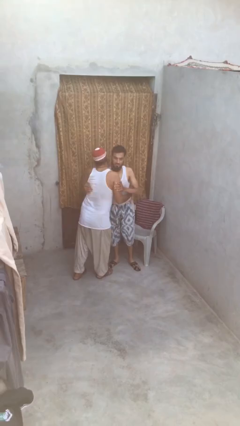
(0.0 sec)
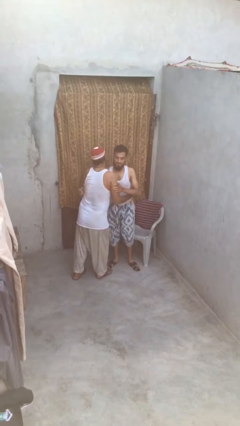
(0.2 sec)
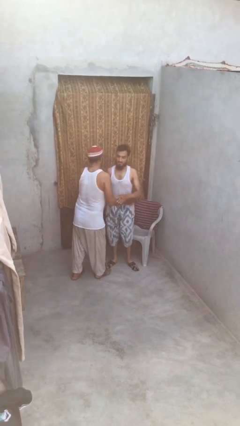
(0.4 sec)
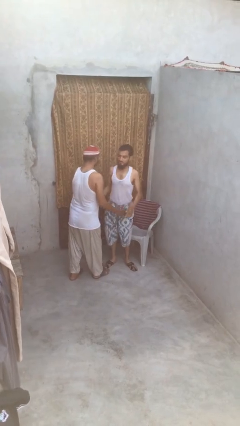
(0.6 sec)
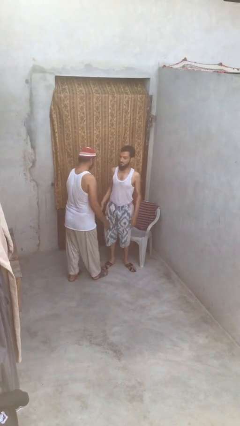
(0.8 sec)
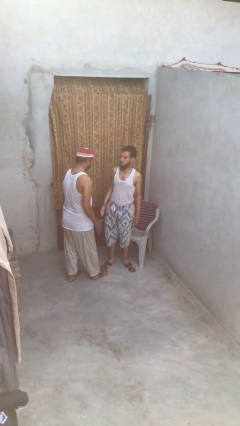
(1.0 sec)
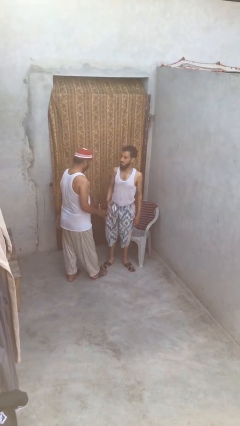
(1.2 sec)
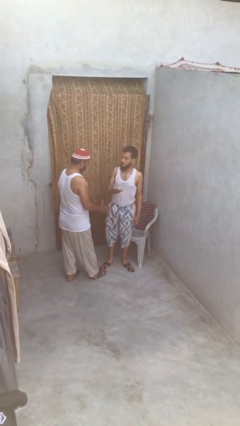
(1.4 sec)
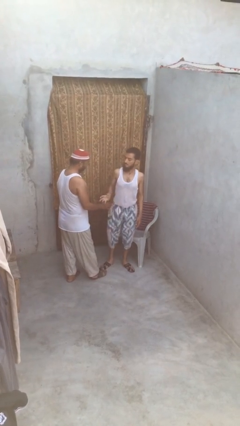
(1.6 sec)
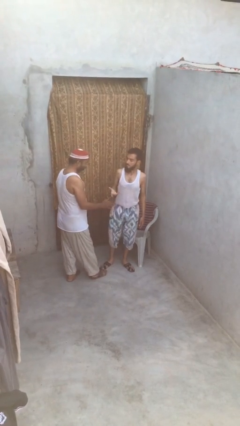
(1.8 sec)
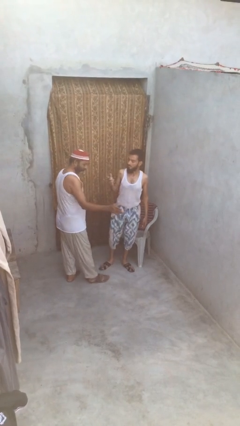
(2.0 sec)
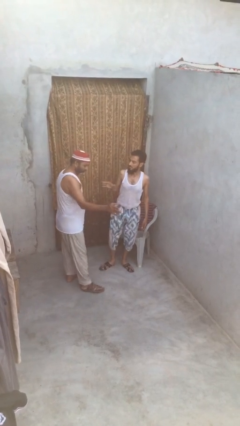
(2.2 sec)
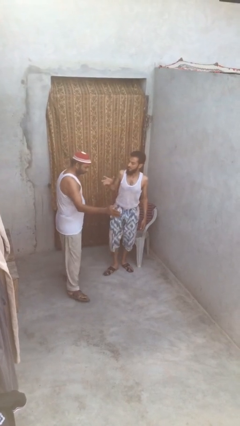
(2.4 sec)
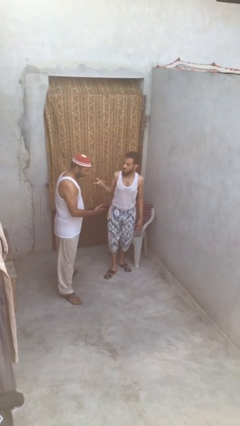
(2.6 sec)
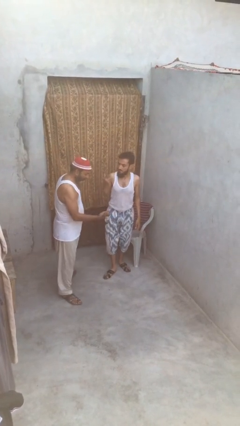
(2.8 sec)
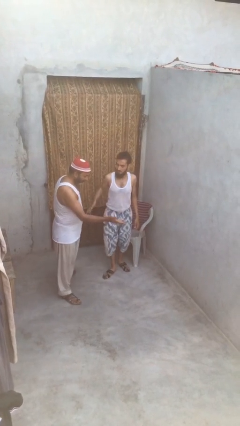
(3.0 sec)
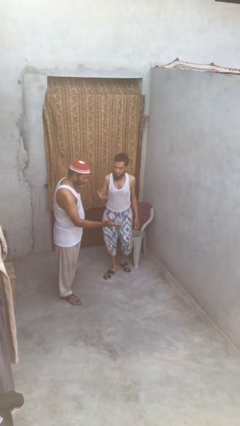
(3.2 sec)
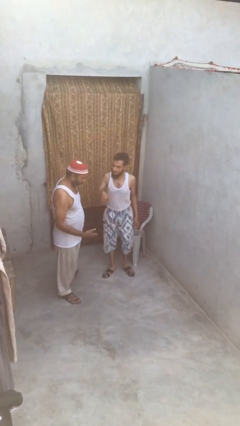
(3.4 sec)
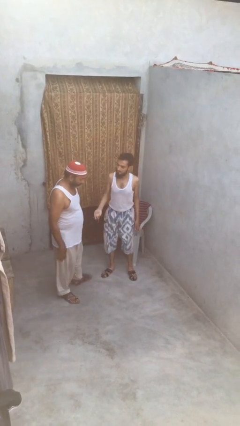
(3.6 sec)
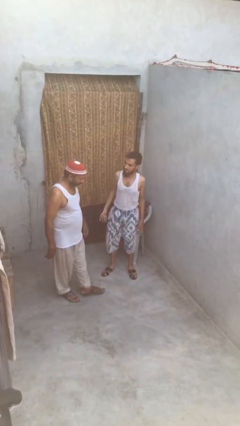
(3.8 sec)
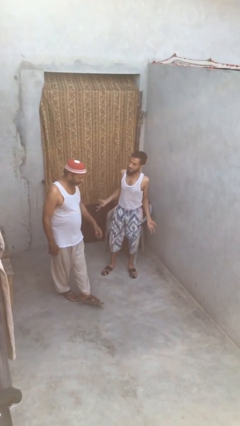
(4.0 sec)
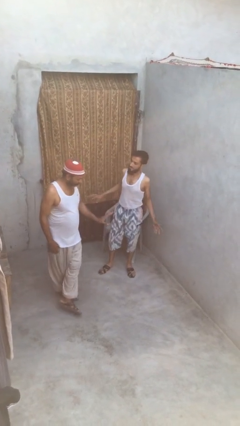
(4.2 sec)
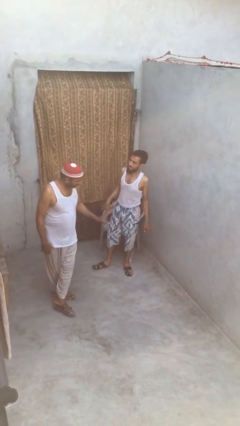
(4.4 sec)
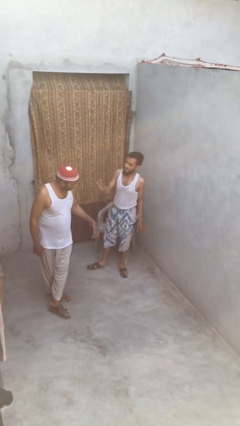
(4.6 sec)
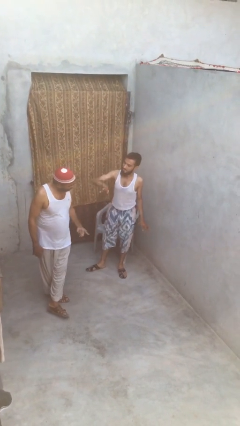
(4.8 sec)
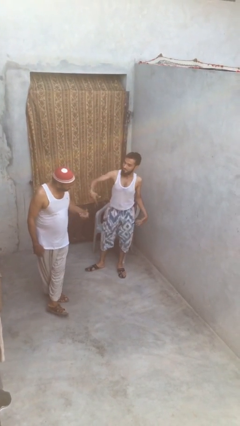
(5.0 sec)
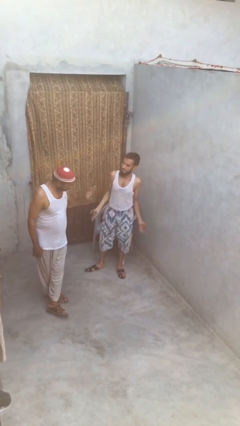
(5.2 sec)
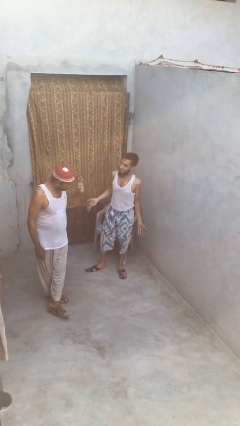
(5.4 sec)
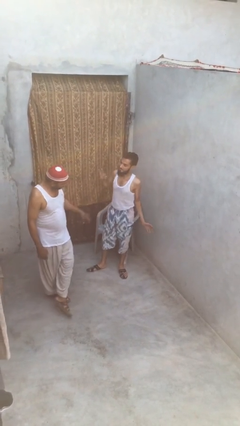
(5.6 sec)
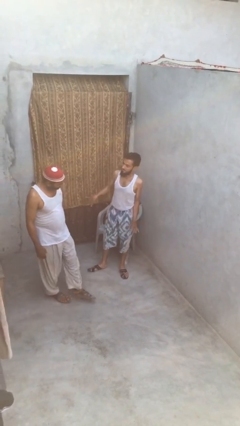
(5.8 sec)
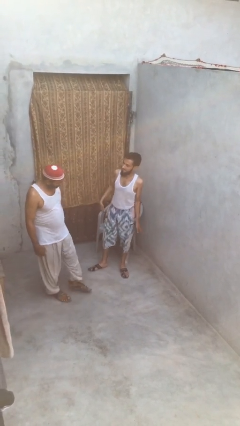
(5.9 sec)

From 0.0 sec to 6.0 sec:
person talks to person

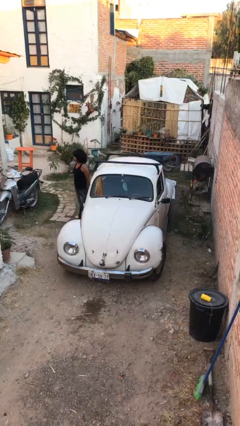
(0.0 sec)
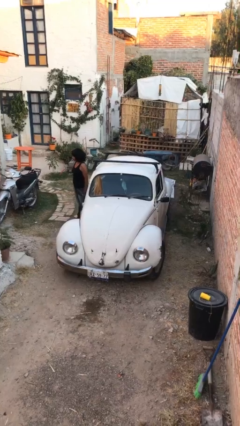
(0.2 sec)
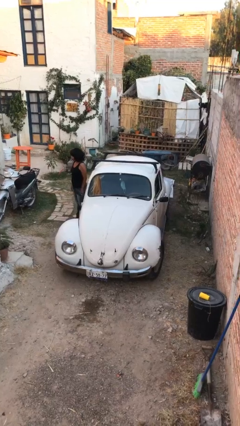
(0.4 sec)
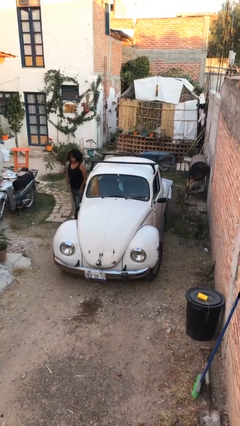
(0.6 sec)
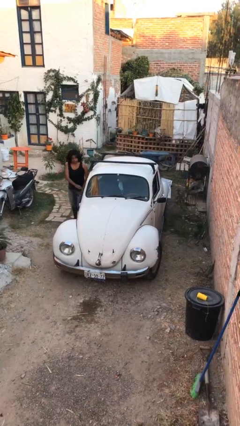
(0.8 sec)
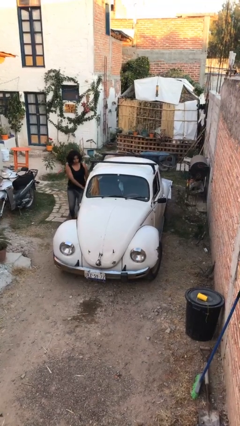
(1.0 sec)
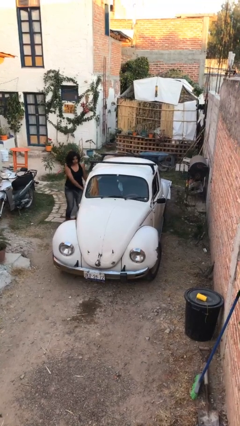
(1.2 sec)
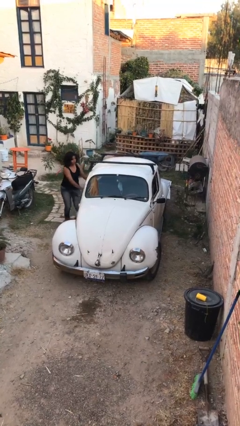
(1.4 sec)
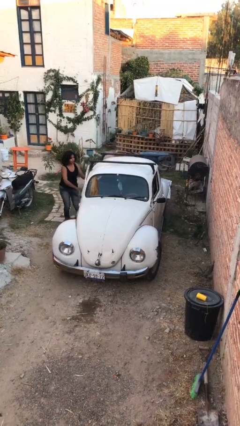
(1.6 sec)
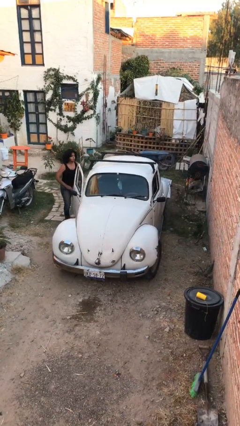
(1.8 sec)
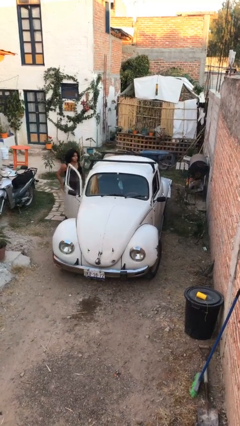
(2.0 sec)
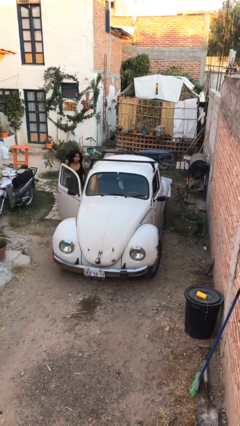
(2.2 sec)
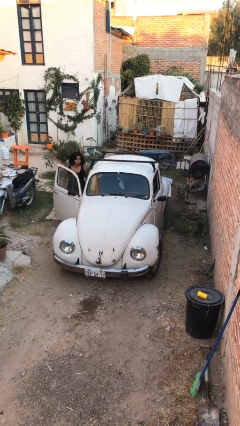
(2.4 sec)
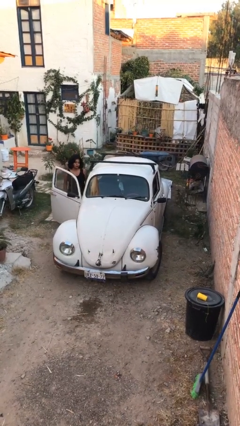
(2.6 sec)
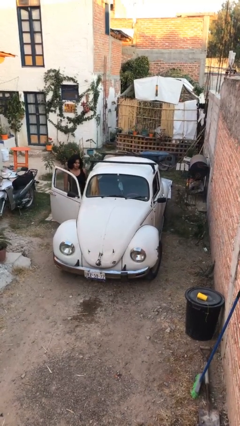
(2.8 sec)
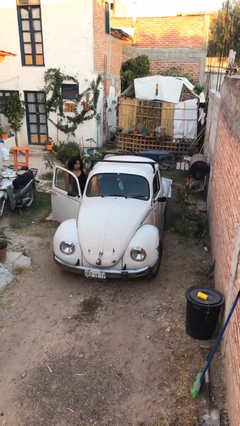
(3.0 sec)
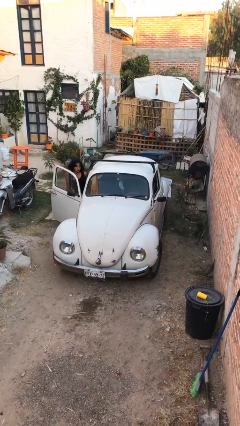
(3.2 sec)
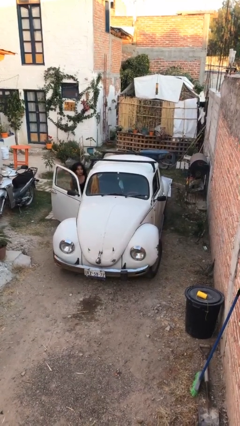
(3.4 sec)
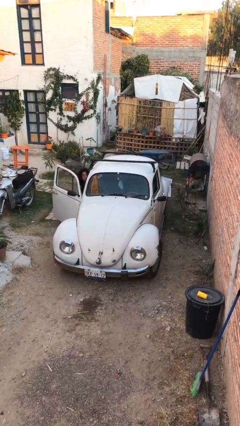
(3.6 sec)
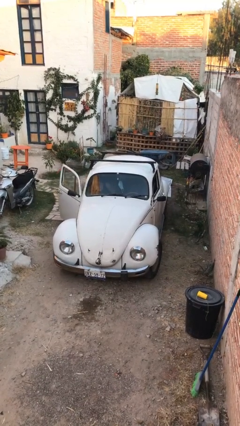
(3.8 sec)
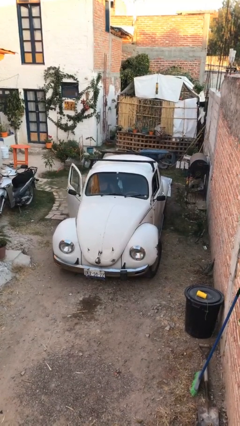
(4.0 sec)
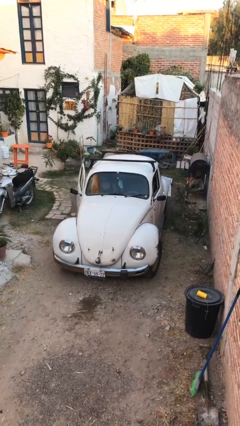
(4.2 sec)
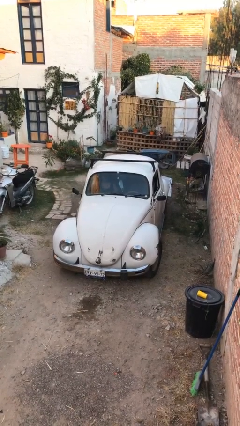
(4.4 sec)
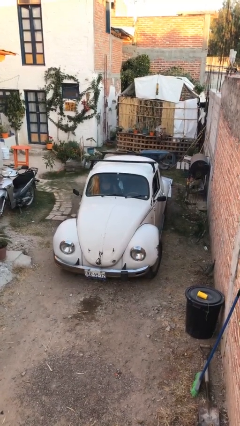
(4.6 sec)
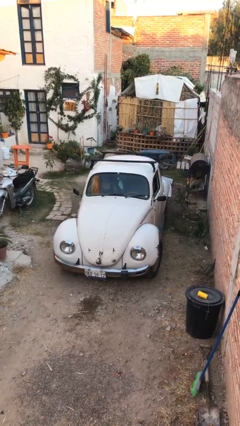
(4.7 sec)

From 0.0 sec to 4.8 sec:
car picks up person

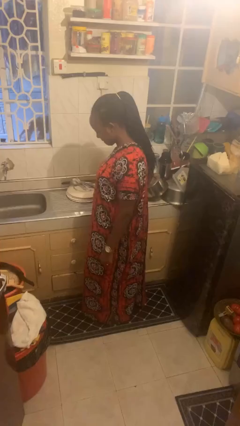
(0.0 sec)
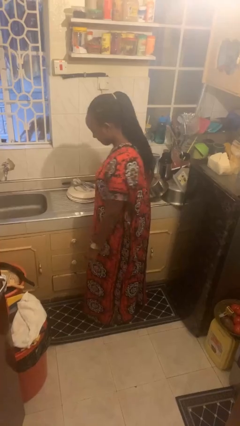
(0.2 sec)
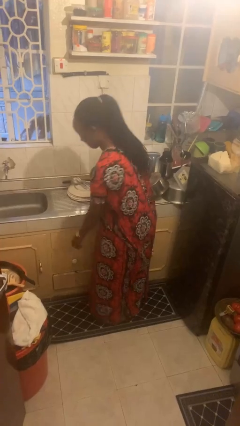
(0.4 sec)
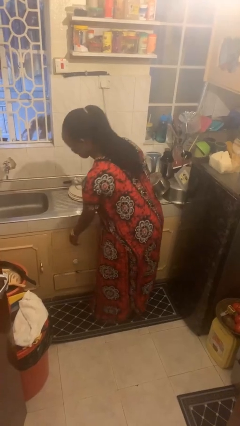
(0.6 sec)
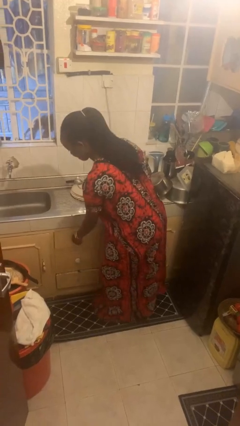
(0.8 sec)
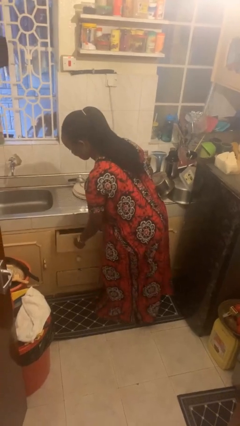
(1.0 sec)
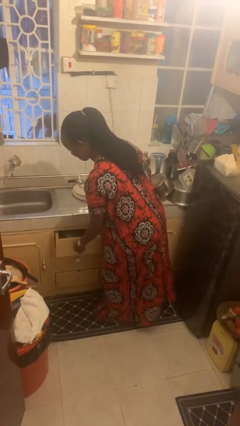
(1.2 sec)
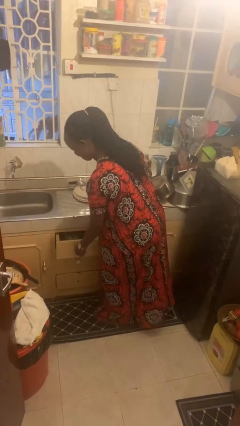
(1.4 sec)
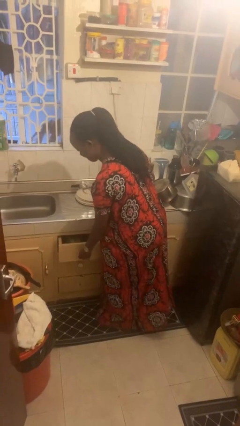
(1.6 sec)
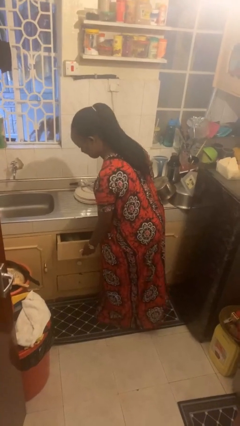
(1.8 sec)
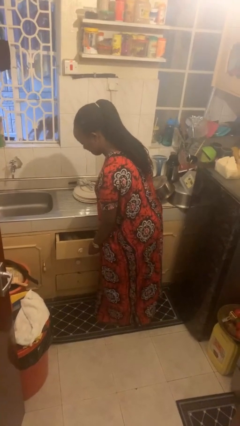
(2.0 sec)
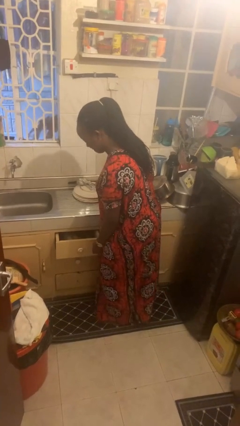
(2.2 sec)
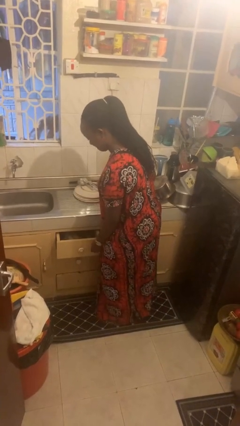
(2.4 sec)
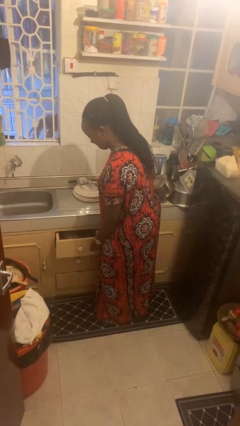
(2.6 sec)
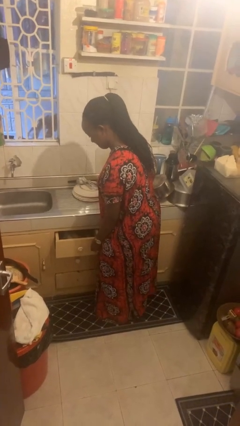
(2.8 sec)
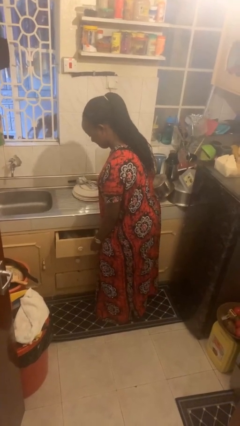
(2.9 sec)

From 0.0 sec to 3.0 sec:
person opens kitchen drawer

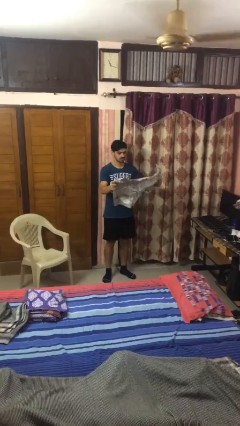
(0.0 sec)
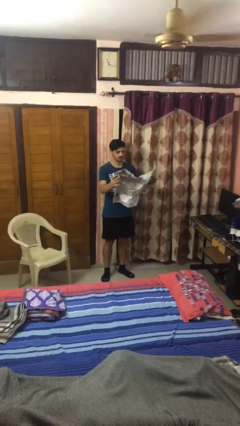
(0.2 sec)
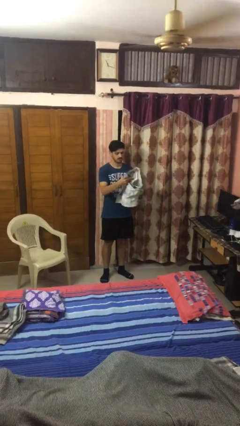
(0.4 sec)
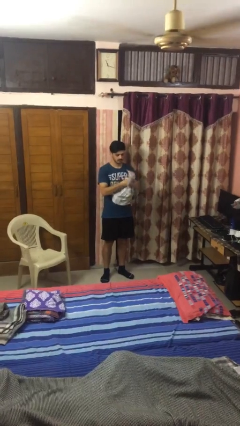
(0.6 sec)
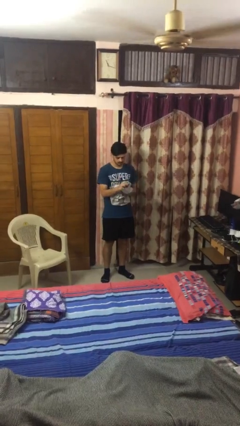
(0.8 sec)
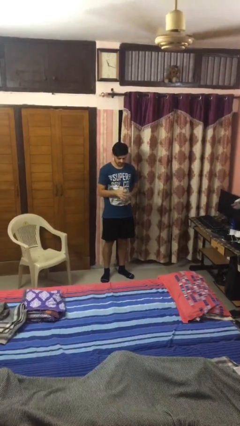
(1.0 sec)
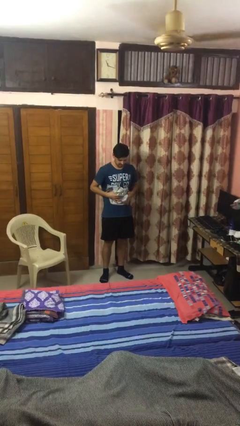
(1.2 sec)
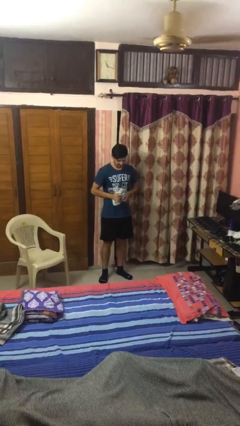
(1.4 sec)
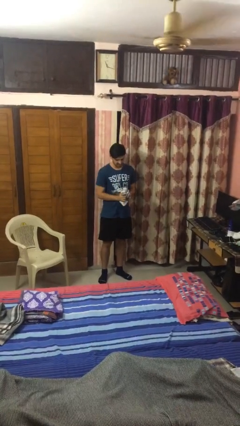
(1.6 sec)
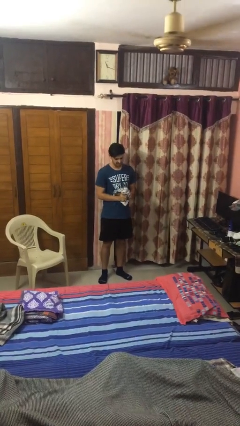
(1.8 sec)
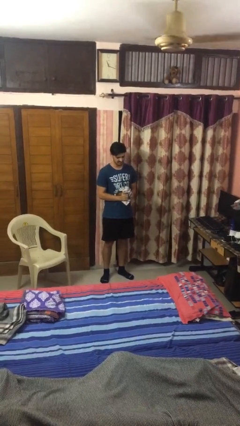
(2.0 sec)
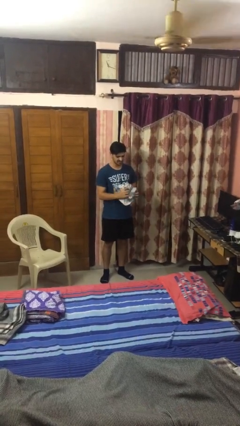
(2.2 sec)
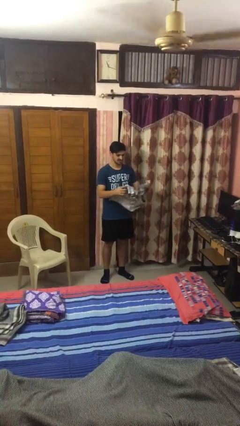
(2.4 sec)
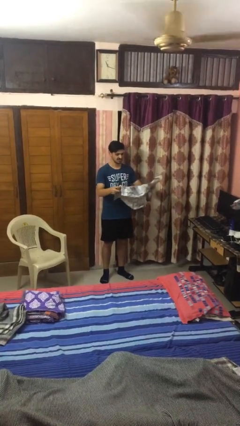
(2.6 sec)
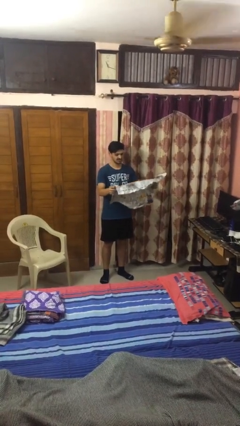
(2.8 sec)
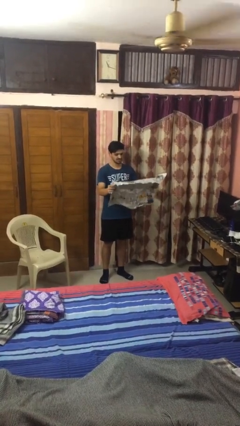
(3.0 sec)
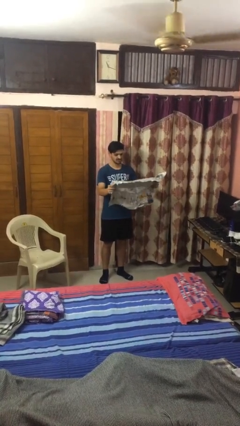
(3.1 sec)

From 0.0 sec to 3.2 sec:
person crumples paper

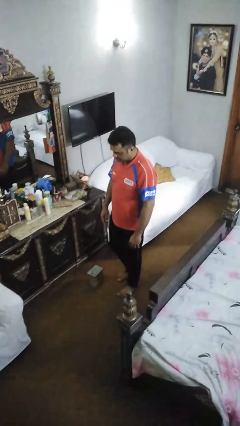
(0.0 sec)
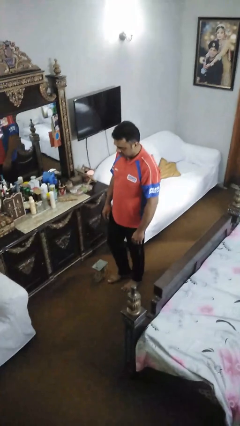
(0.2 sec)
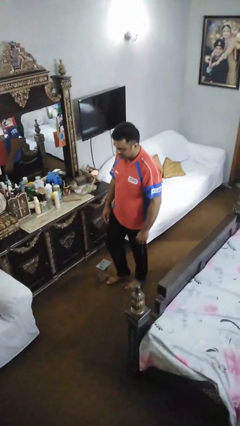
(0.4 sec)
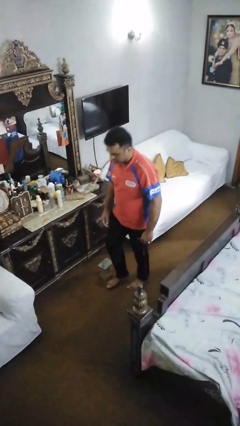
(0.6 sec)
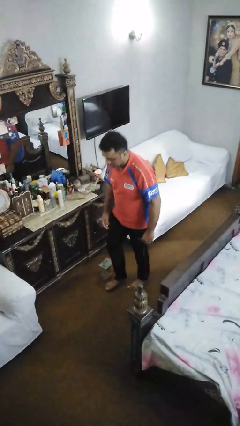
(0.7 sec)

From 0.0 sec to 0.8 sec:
person trips on object on floor
